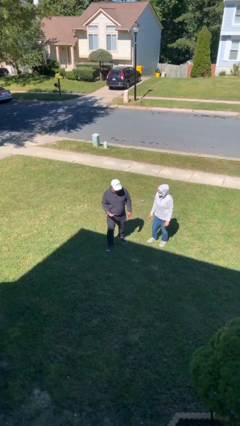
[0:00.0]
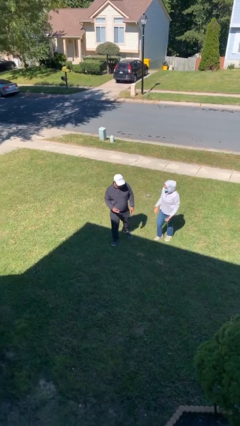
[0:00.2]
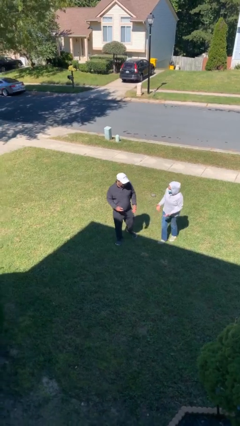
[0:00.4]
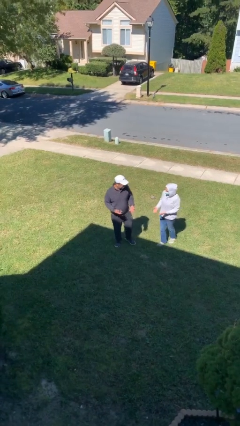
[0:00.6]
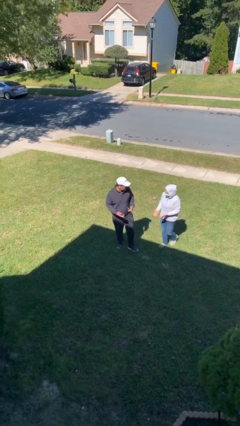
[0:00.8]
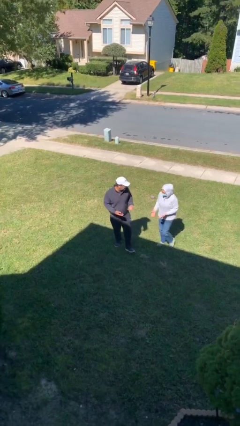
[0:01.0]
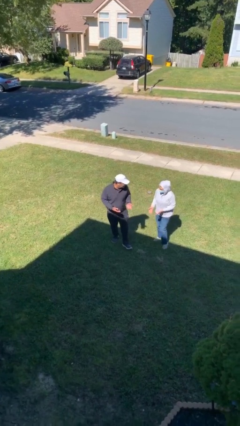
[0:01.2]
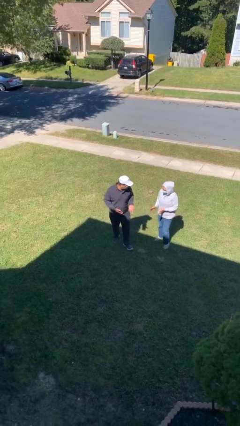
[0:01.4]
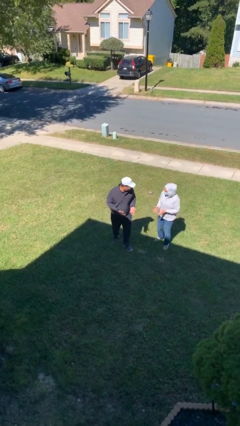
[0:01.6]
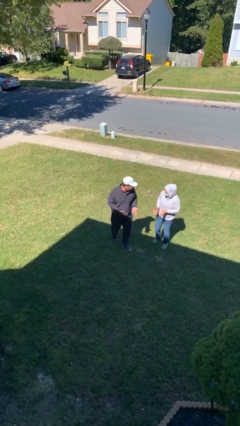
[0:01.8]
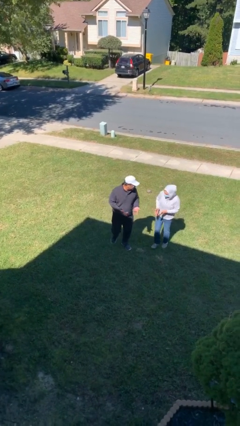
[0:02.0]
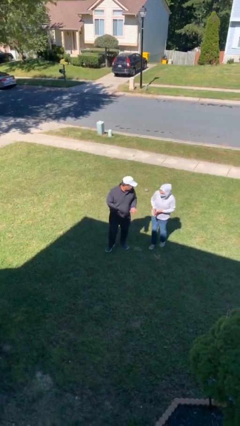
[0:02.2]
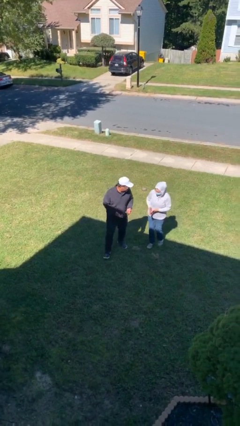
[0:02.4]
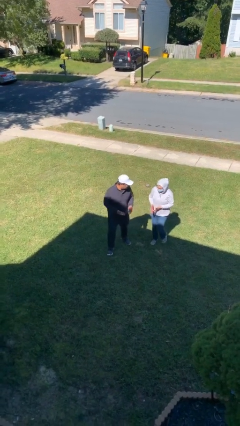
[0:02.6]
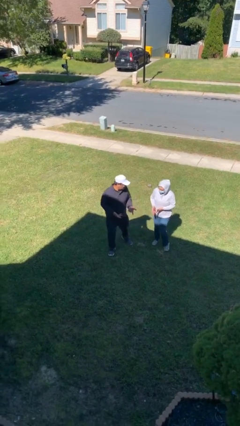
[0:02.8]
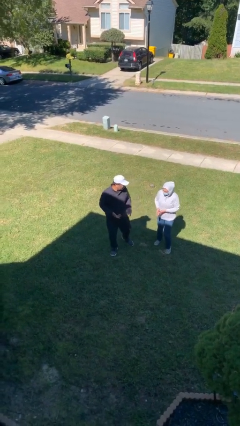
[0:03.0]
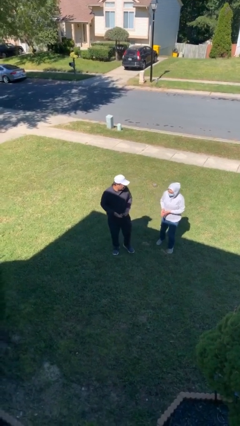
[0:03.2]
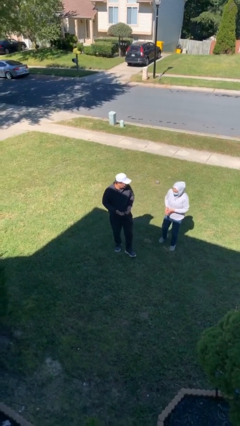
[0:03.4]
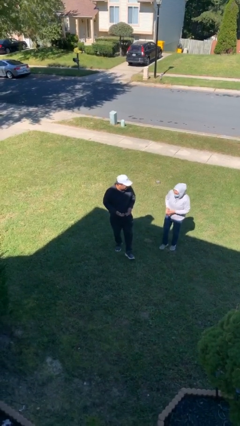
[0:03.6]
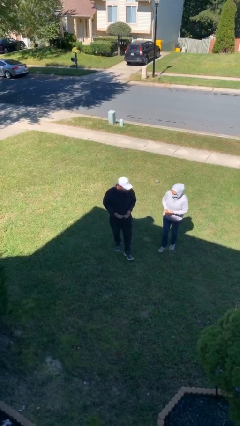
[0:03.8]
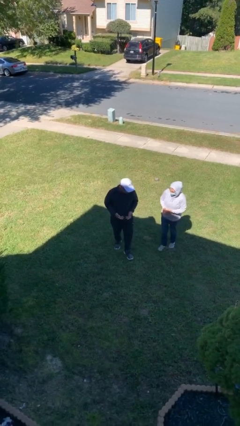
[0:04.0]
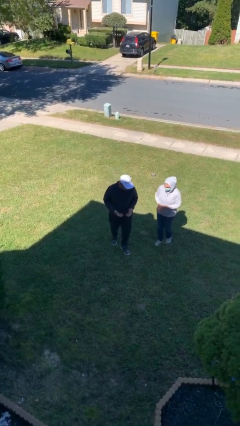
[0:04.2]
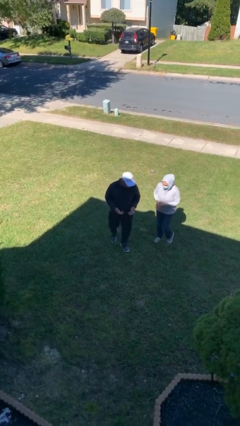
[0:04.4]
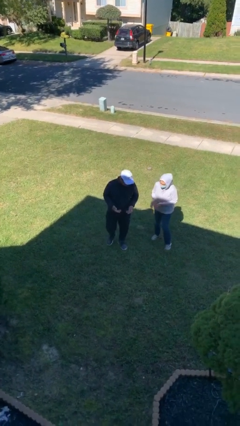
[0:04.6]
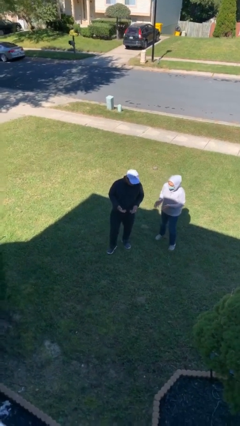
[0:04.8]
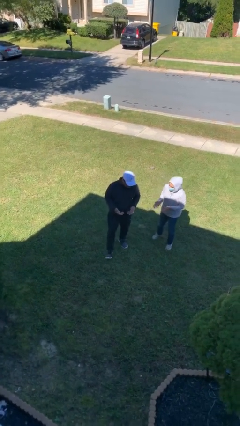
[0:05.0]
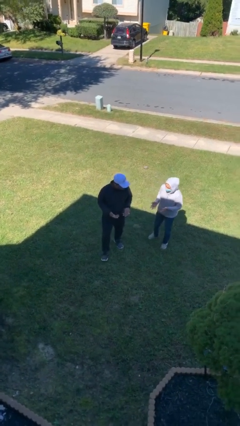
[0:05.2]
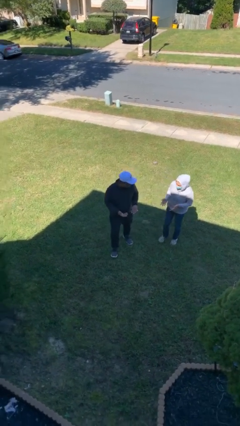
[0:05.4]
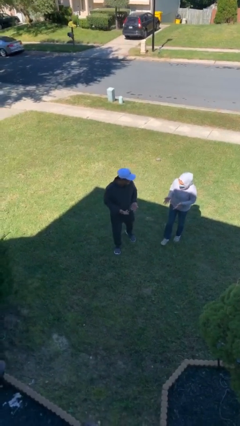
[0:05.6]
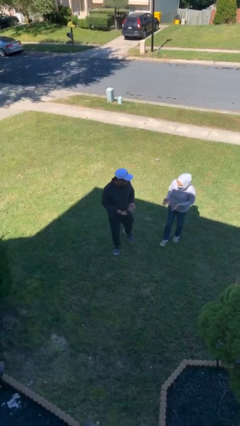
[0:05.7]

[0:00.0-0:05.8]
person talks to person

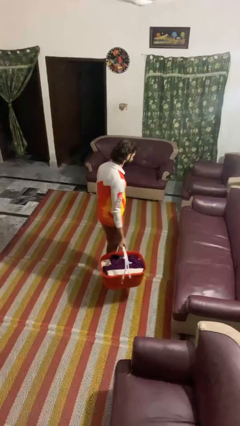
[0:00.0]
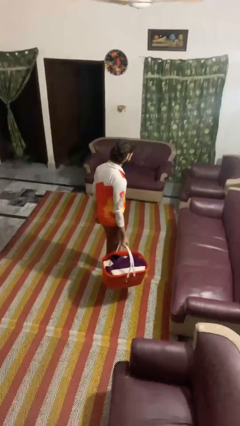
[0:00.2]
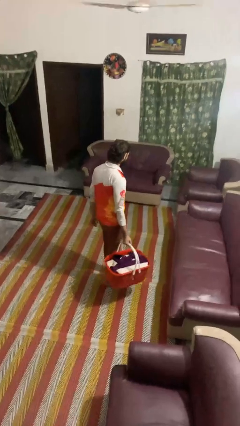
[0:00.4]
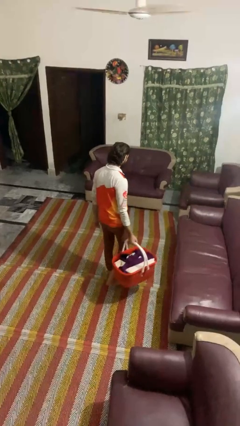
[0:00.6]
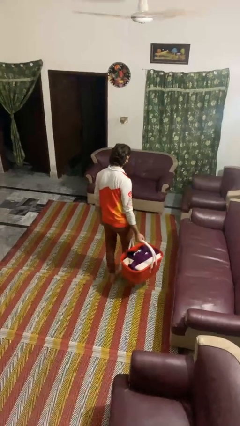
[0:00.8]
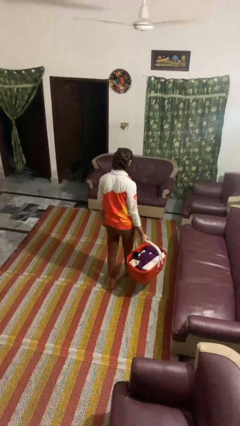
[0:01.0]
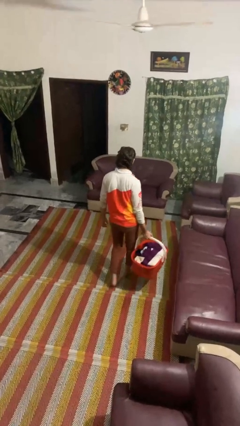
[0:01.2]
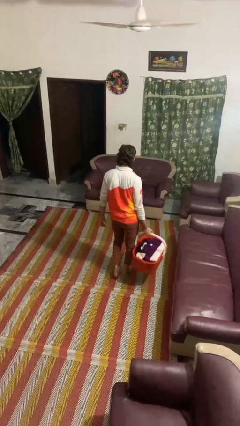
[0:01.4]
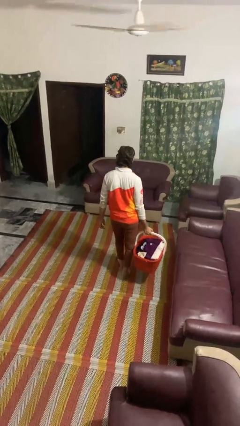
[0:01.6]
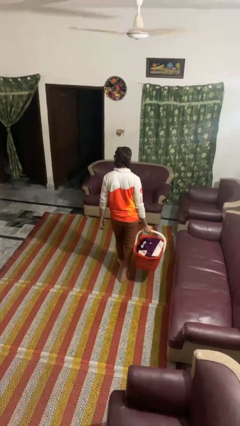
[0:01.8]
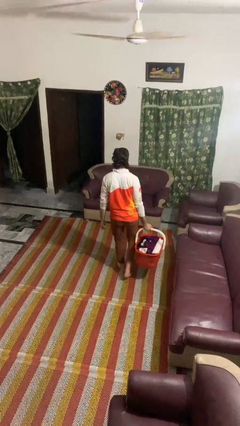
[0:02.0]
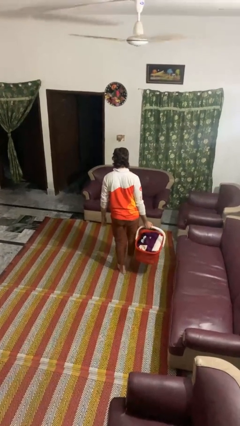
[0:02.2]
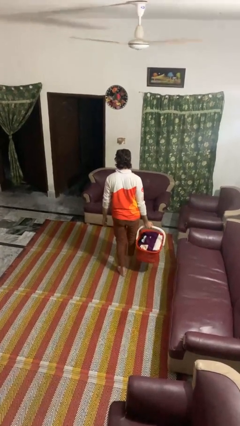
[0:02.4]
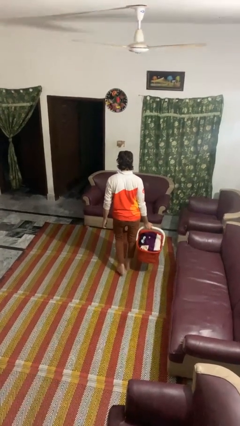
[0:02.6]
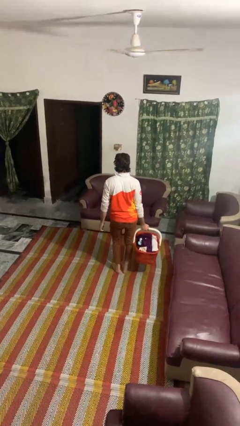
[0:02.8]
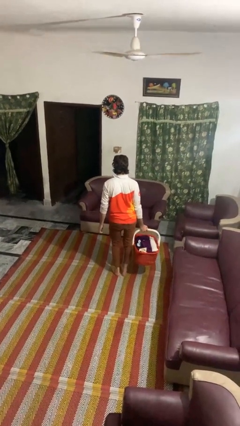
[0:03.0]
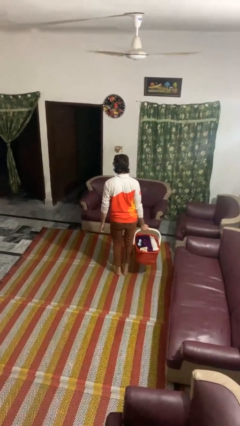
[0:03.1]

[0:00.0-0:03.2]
person carries laundry basket

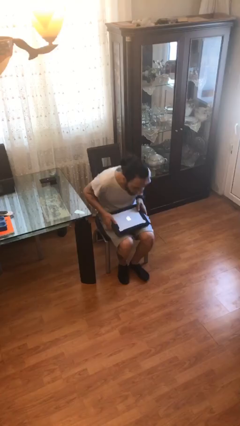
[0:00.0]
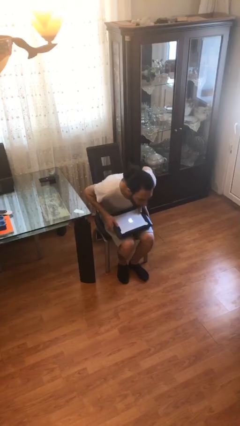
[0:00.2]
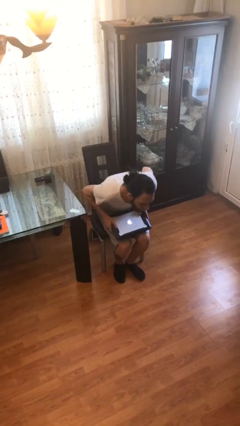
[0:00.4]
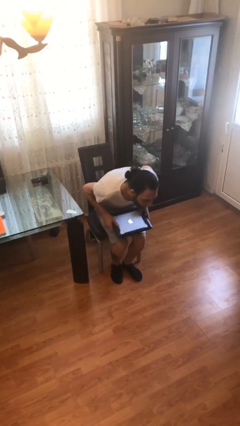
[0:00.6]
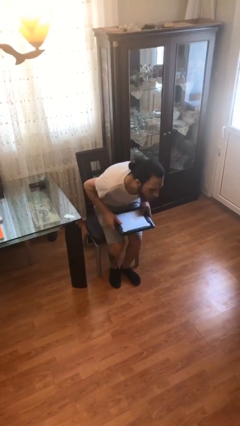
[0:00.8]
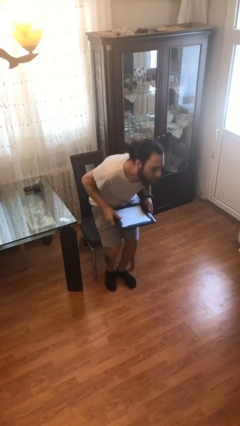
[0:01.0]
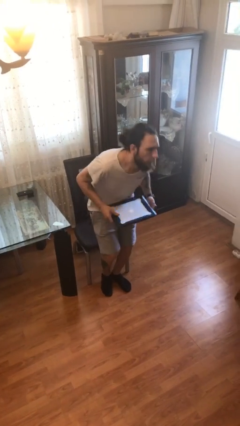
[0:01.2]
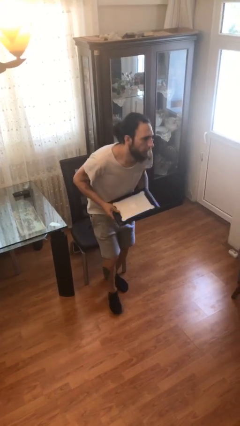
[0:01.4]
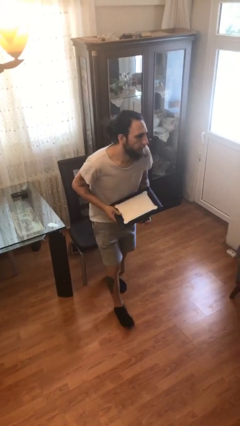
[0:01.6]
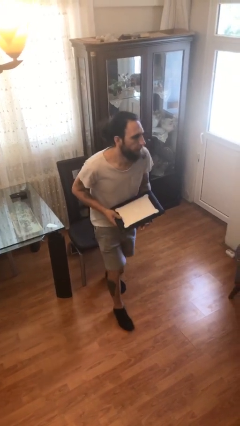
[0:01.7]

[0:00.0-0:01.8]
person stands up

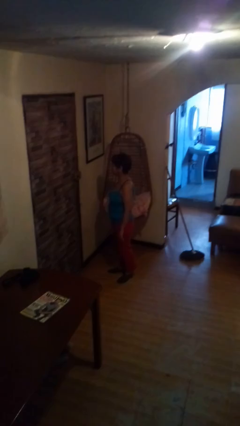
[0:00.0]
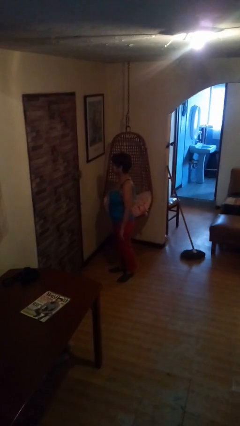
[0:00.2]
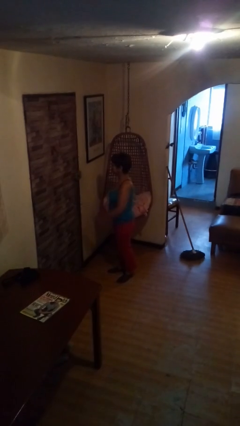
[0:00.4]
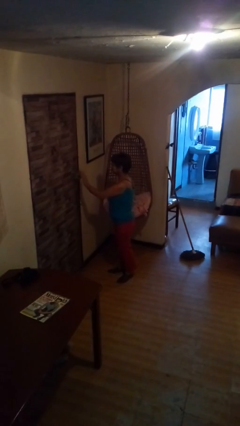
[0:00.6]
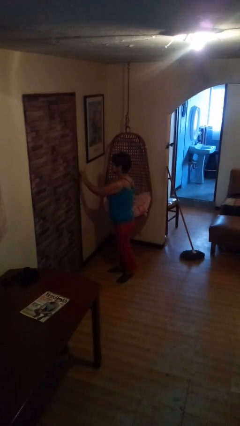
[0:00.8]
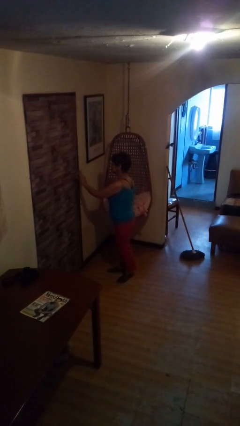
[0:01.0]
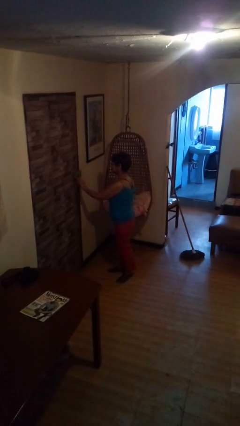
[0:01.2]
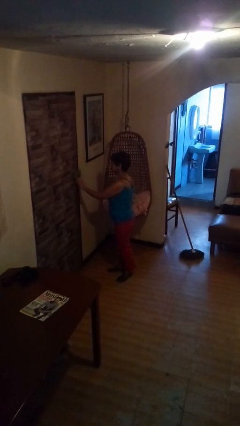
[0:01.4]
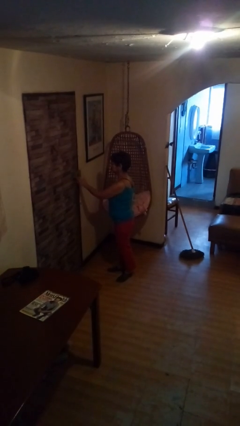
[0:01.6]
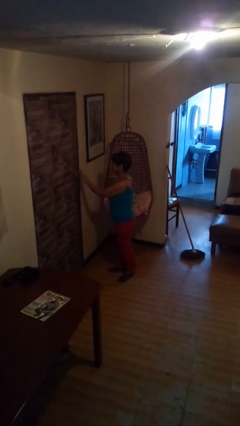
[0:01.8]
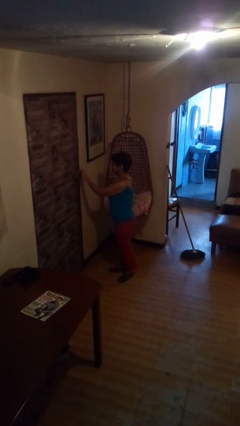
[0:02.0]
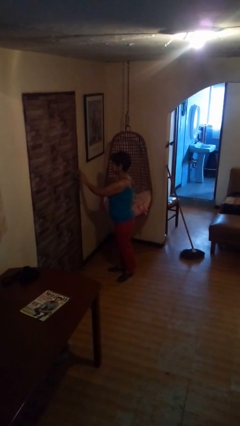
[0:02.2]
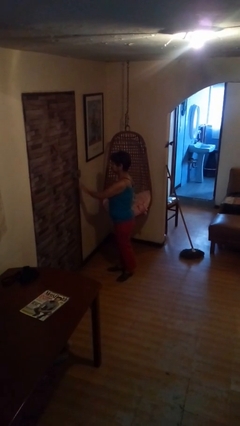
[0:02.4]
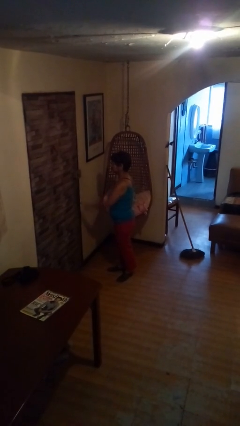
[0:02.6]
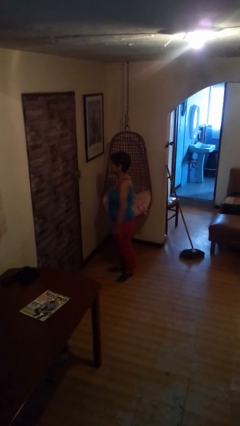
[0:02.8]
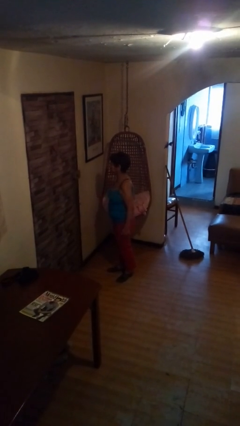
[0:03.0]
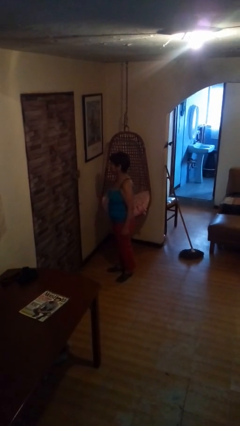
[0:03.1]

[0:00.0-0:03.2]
person taps object with finger

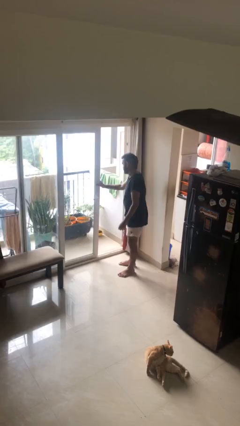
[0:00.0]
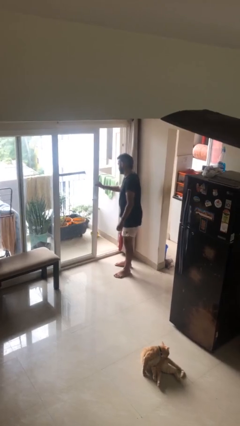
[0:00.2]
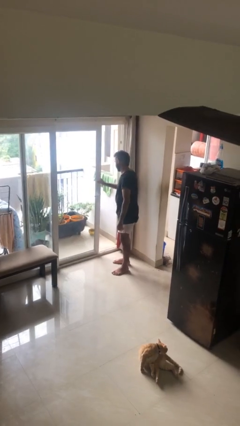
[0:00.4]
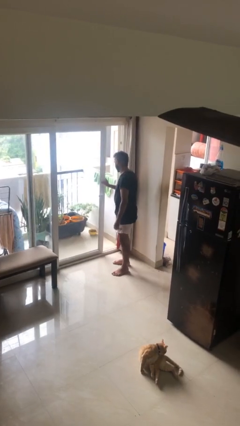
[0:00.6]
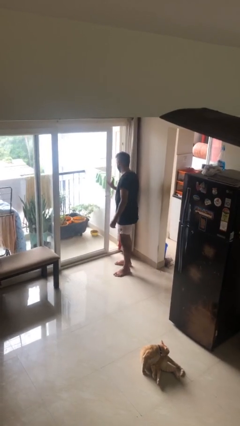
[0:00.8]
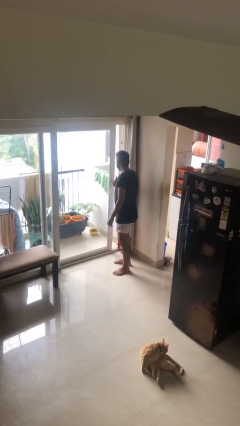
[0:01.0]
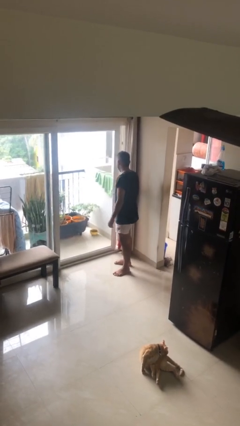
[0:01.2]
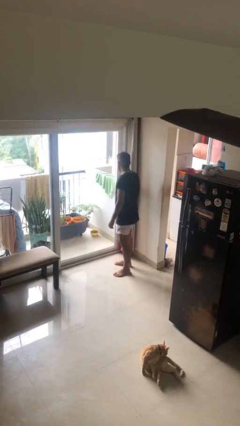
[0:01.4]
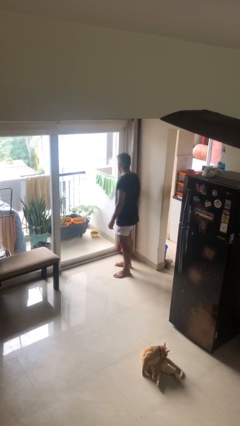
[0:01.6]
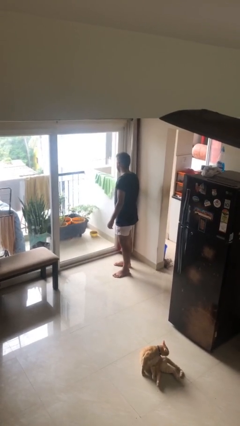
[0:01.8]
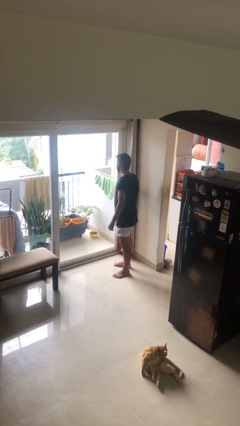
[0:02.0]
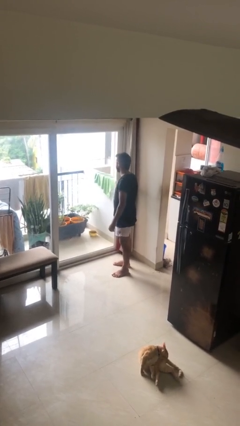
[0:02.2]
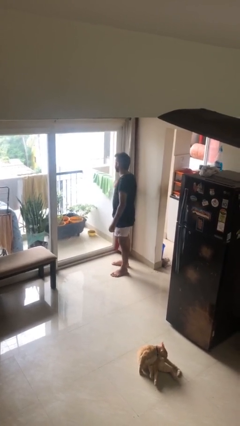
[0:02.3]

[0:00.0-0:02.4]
person closes facility door

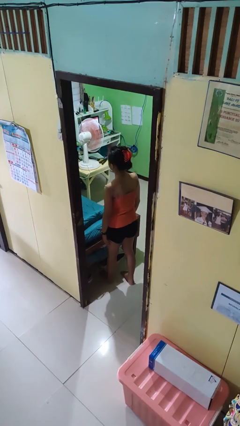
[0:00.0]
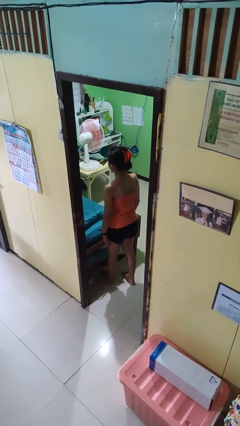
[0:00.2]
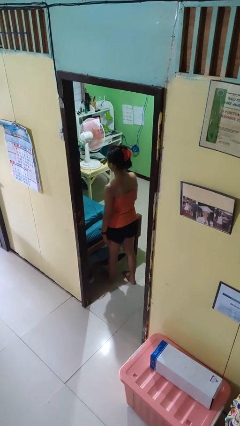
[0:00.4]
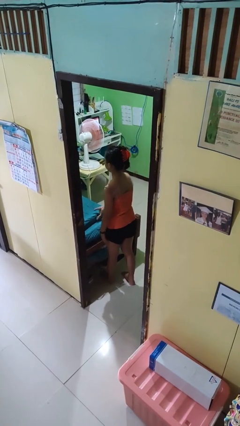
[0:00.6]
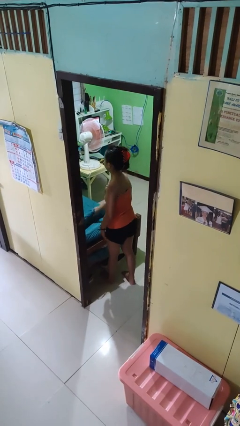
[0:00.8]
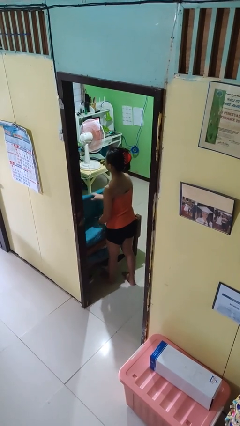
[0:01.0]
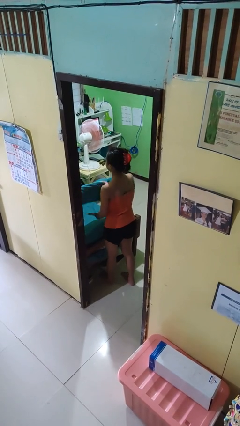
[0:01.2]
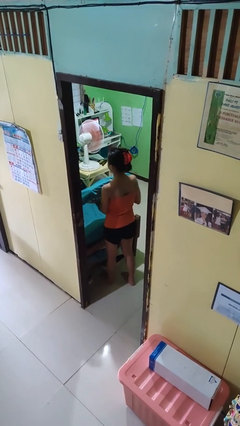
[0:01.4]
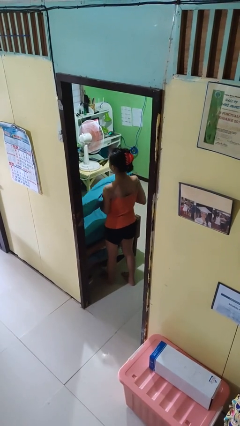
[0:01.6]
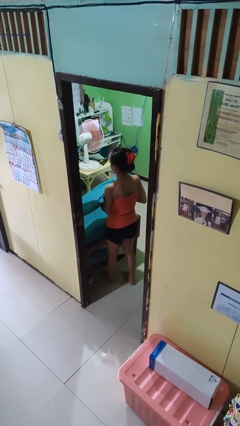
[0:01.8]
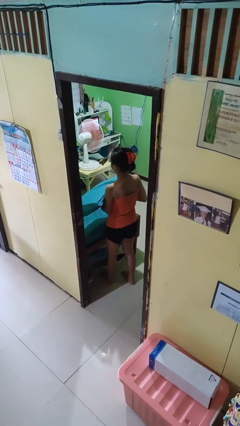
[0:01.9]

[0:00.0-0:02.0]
person picks up object from bed
